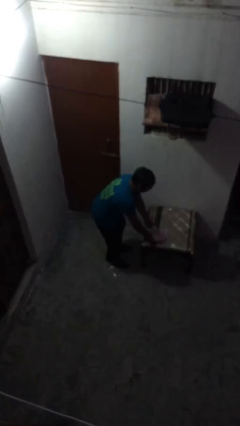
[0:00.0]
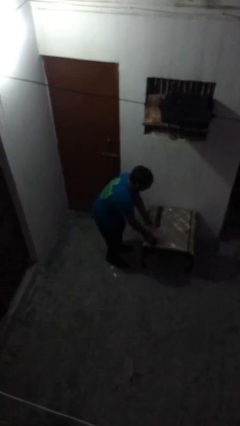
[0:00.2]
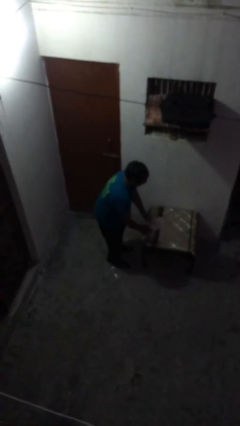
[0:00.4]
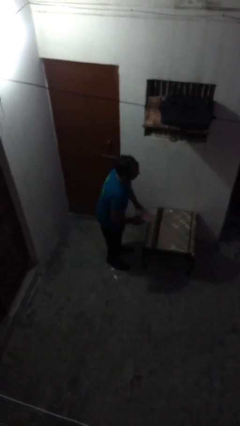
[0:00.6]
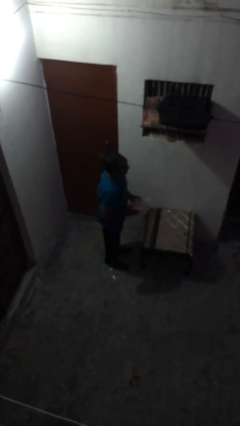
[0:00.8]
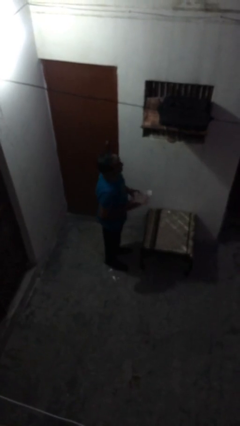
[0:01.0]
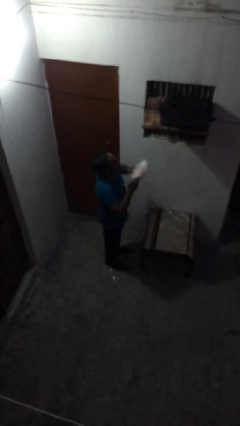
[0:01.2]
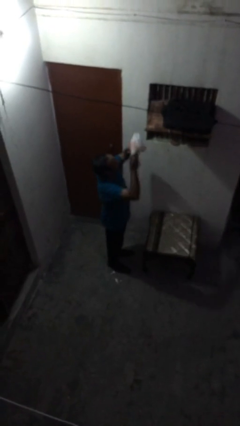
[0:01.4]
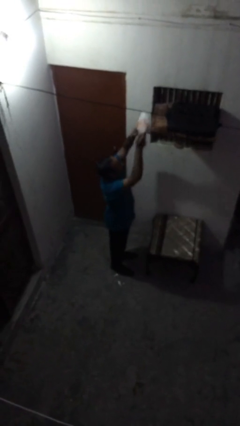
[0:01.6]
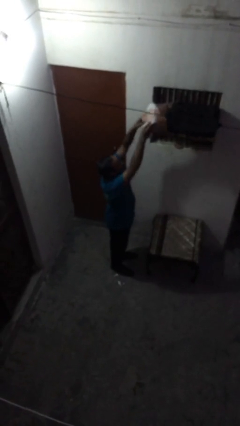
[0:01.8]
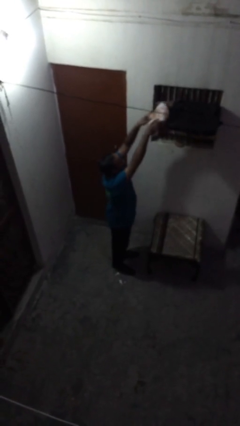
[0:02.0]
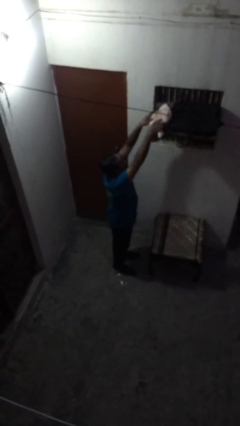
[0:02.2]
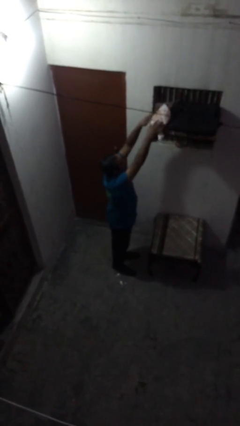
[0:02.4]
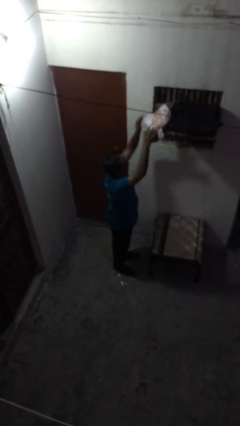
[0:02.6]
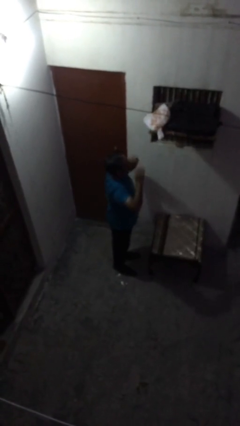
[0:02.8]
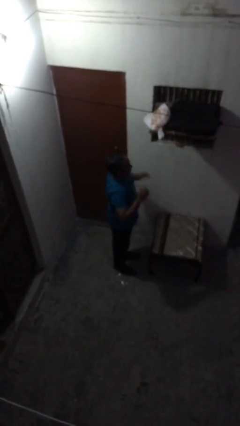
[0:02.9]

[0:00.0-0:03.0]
person puts down object on shelf

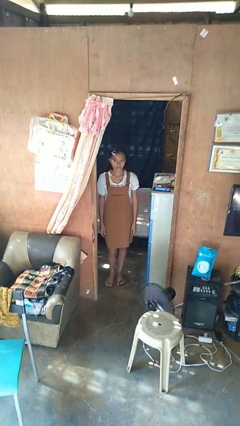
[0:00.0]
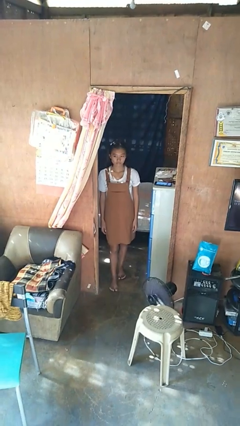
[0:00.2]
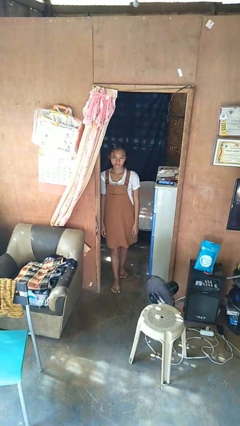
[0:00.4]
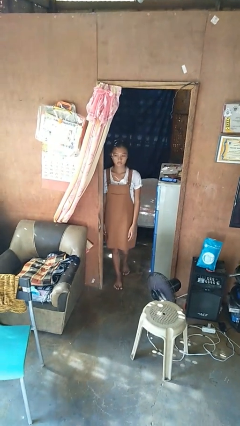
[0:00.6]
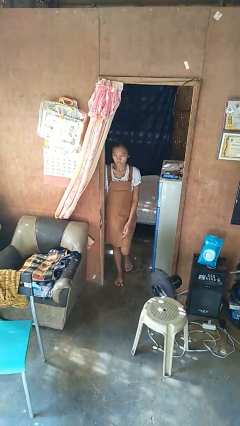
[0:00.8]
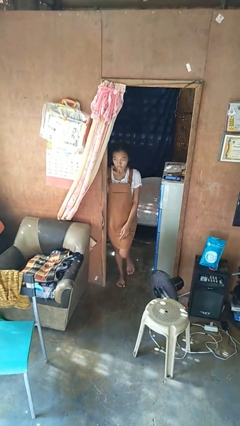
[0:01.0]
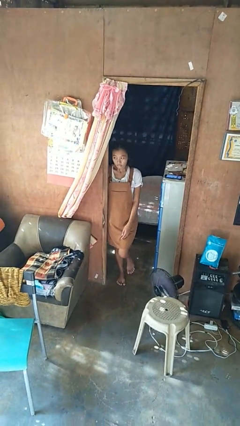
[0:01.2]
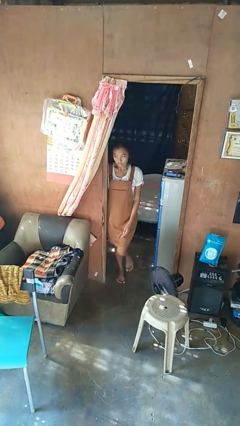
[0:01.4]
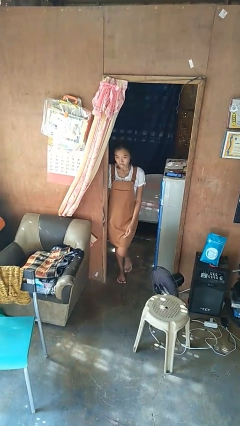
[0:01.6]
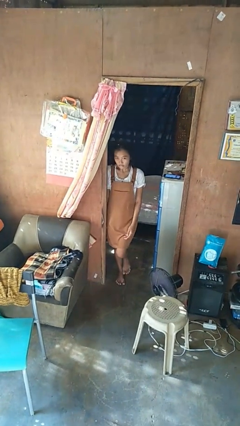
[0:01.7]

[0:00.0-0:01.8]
person bumps into wall

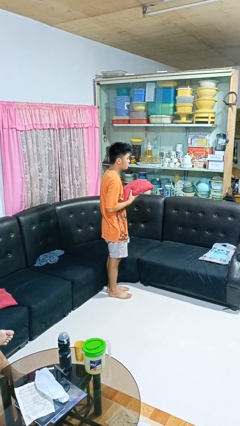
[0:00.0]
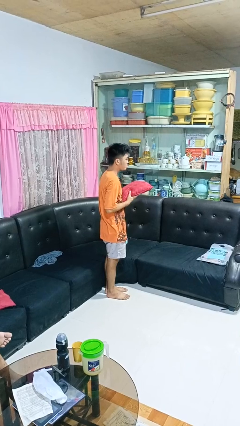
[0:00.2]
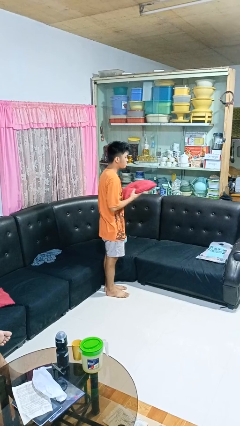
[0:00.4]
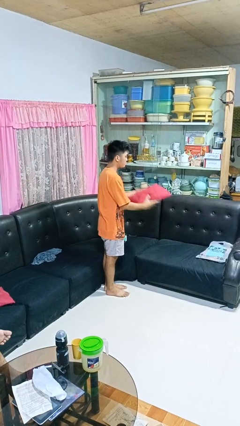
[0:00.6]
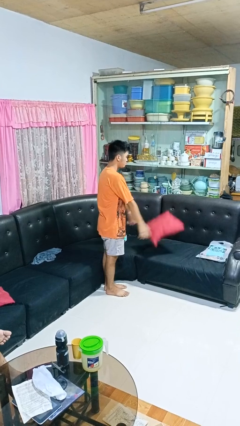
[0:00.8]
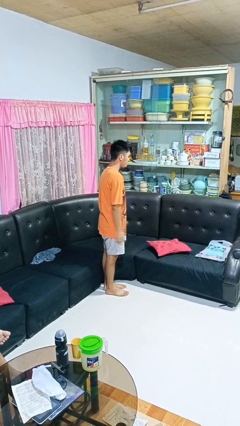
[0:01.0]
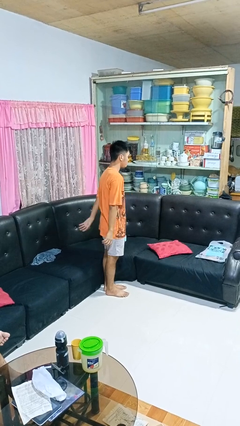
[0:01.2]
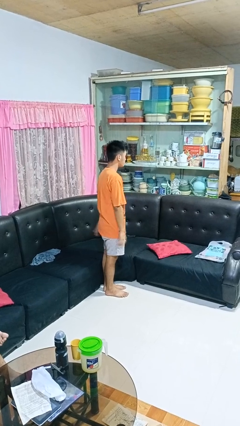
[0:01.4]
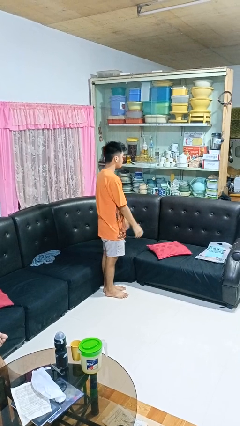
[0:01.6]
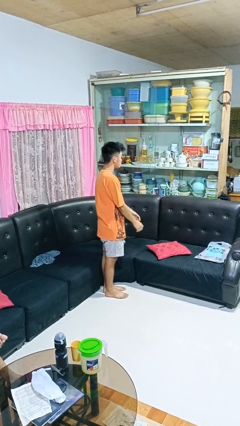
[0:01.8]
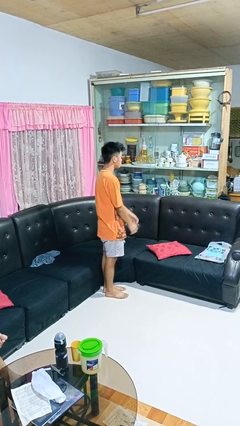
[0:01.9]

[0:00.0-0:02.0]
person puts down object on couch

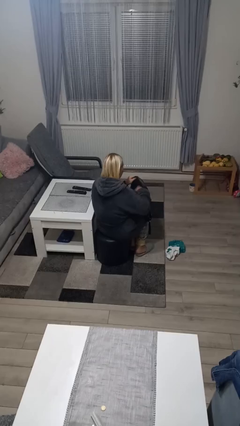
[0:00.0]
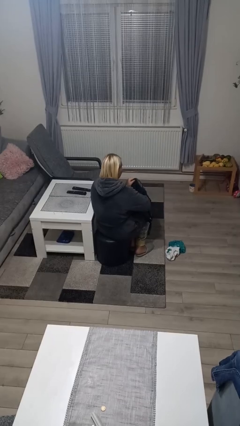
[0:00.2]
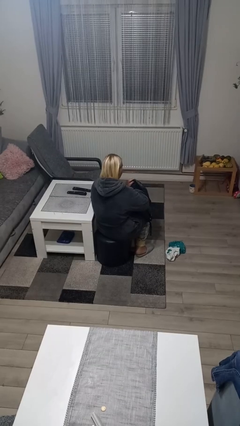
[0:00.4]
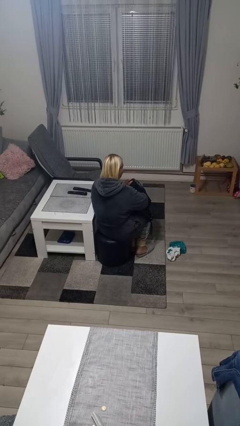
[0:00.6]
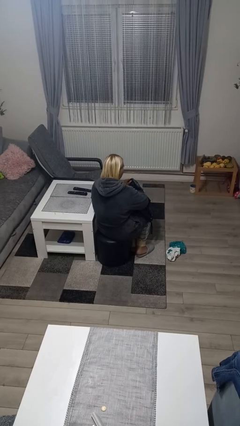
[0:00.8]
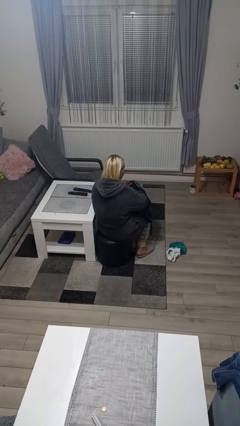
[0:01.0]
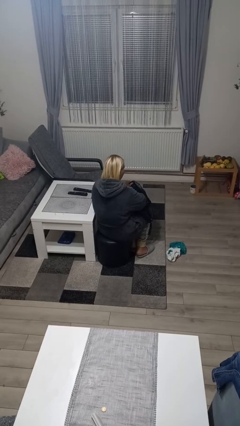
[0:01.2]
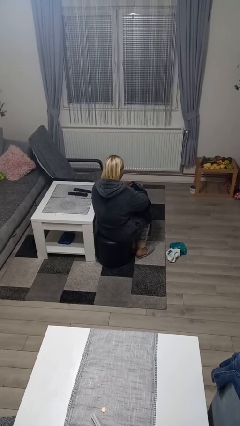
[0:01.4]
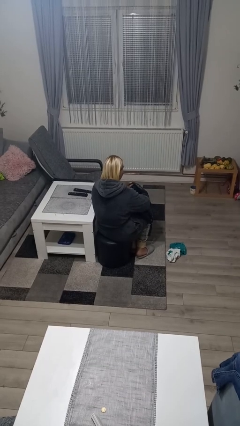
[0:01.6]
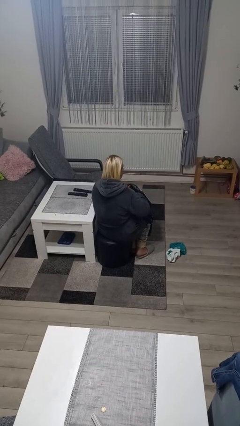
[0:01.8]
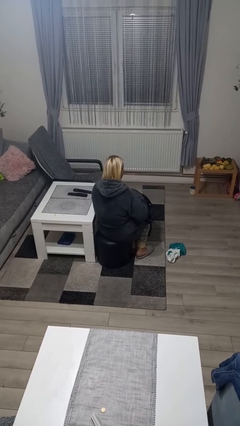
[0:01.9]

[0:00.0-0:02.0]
person searches in bag

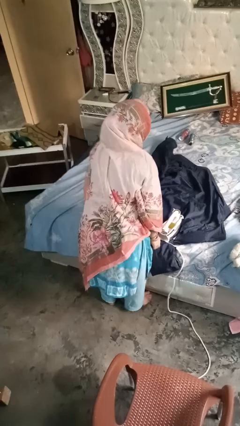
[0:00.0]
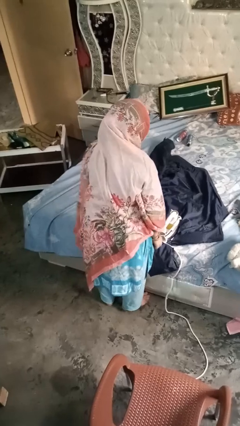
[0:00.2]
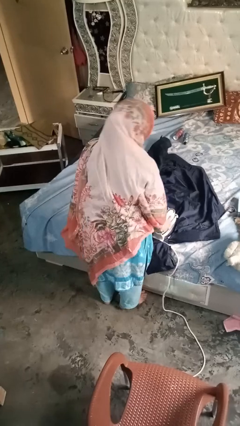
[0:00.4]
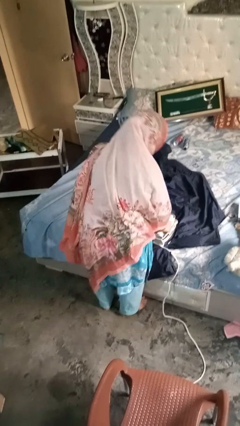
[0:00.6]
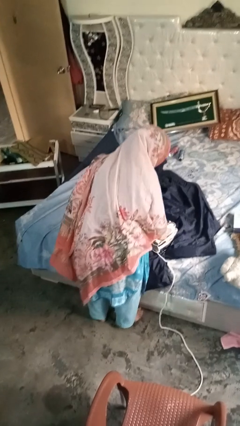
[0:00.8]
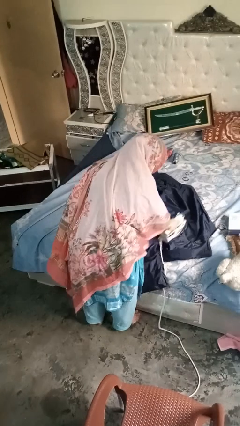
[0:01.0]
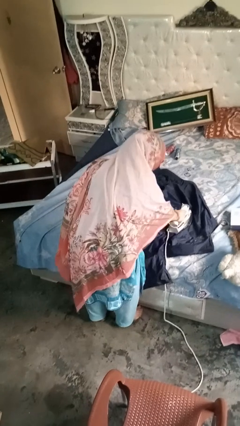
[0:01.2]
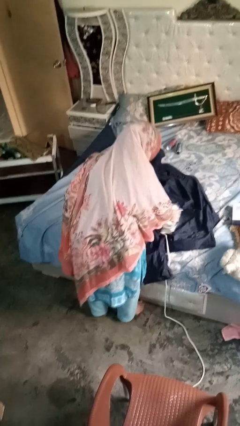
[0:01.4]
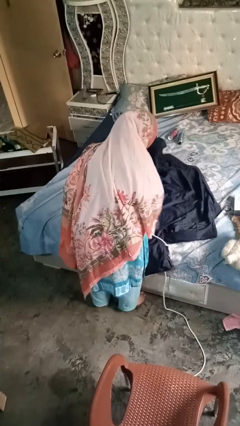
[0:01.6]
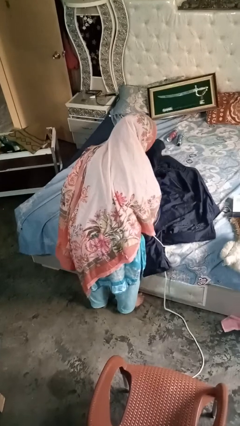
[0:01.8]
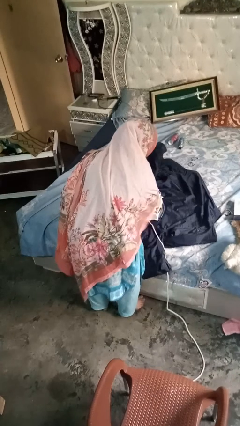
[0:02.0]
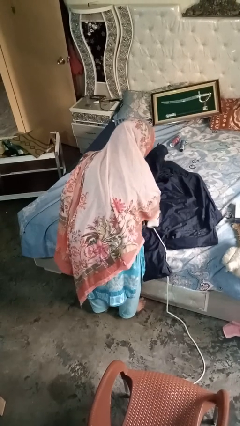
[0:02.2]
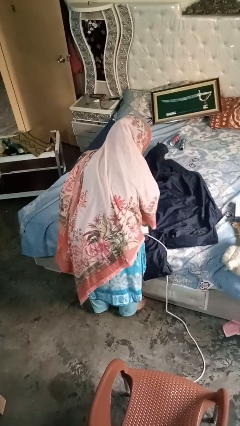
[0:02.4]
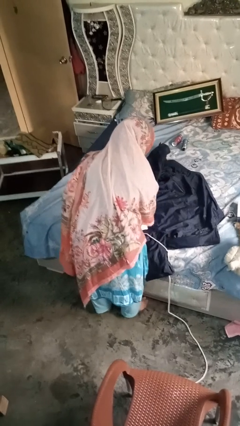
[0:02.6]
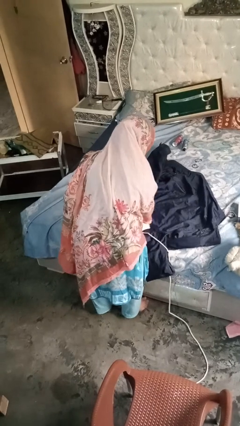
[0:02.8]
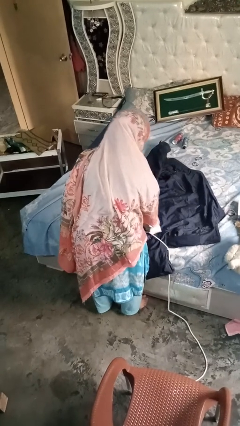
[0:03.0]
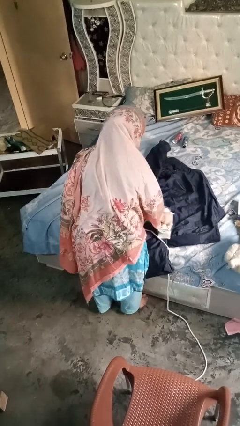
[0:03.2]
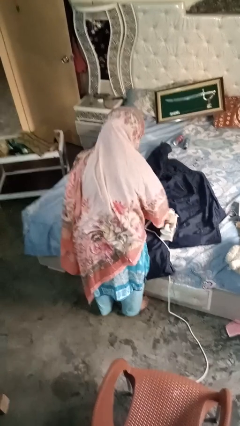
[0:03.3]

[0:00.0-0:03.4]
person irons clothes

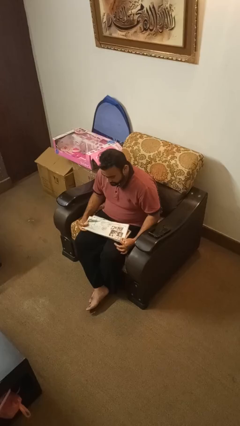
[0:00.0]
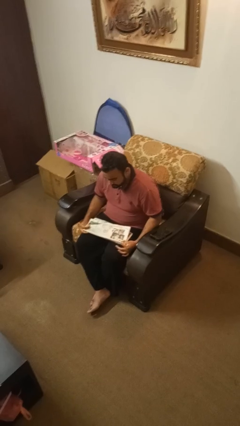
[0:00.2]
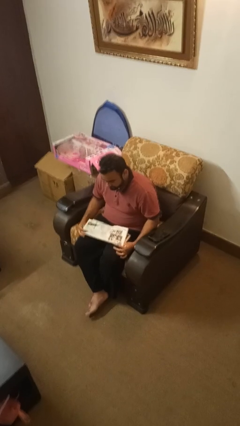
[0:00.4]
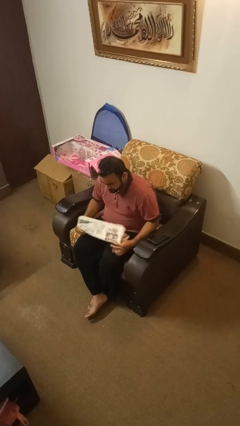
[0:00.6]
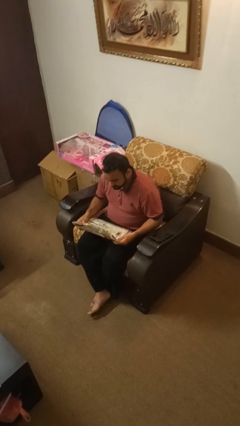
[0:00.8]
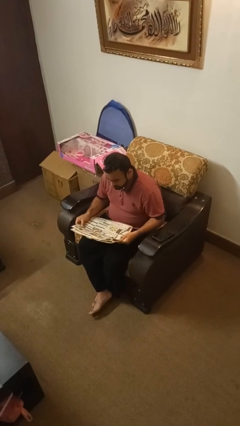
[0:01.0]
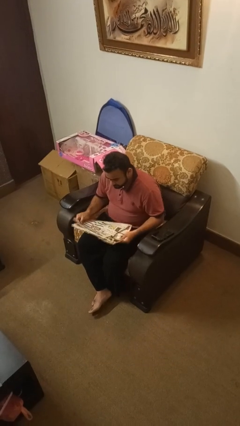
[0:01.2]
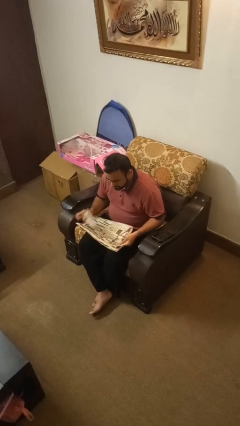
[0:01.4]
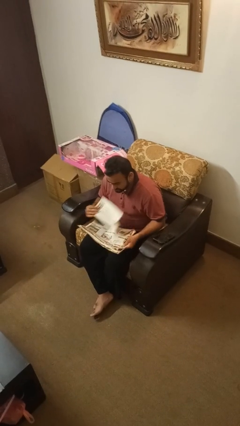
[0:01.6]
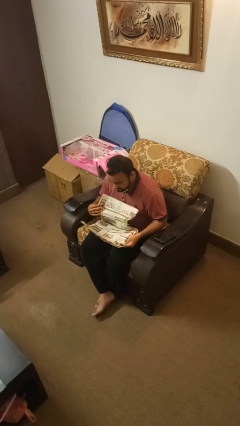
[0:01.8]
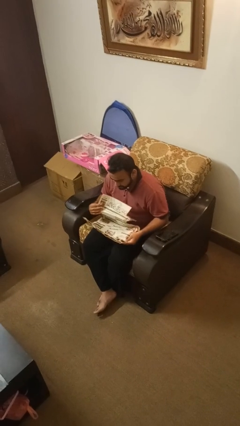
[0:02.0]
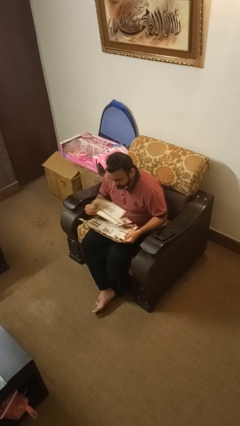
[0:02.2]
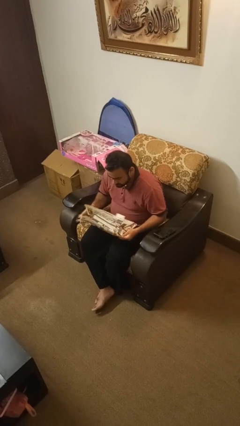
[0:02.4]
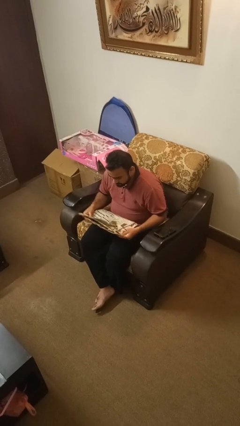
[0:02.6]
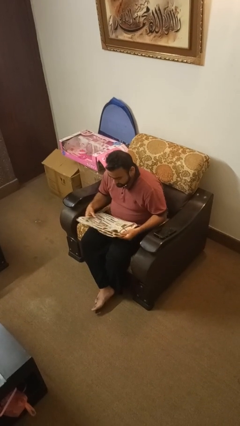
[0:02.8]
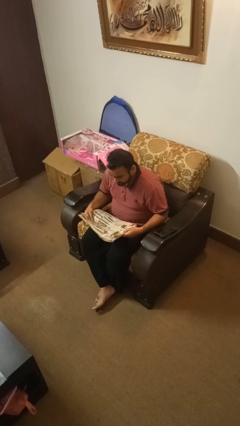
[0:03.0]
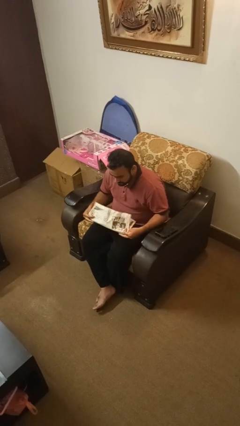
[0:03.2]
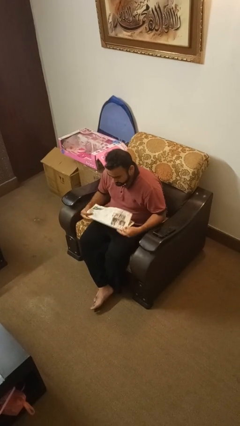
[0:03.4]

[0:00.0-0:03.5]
person reads newspaper

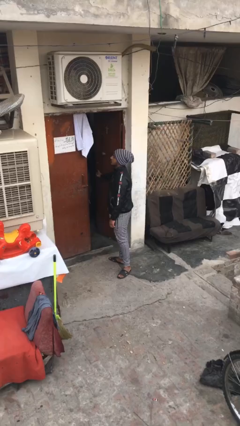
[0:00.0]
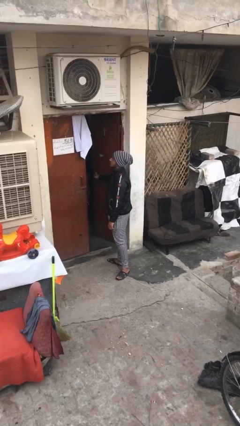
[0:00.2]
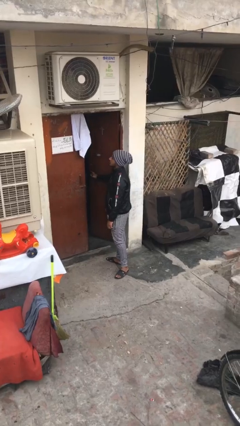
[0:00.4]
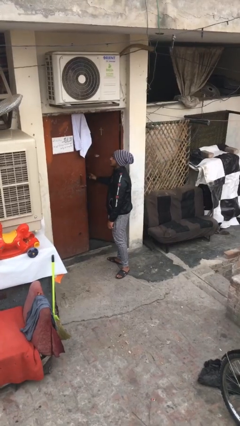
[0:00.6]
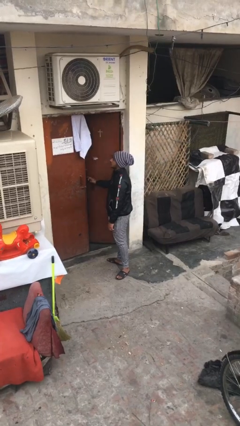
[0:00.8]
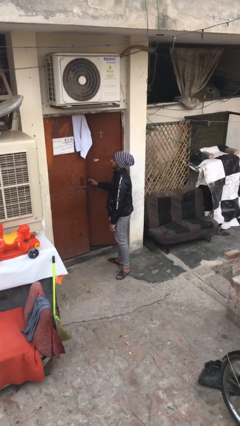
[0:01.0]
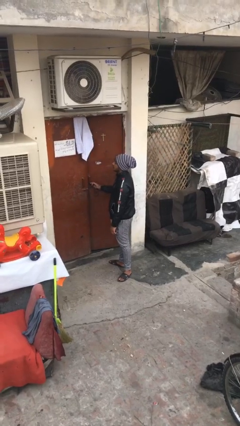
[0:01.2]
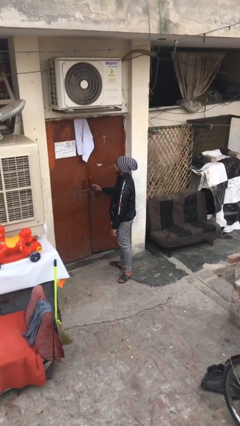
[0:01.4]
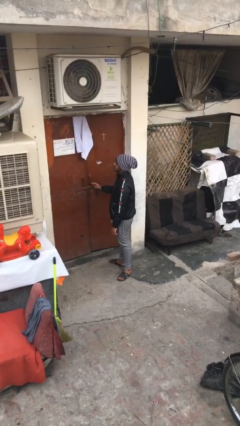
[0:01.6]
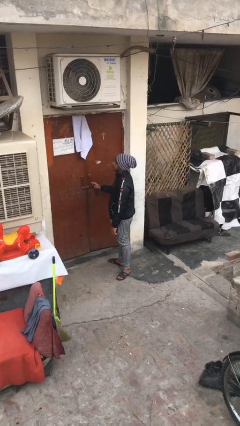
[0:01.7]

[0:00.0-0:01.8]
person closes facility door
